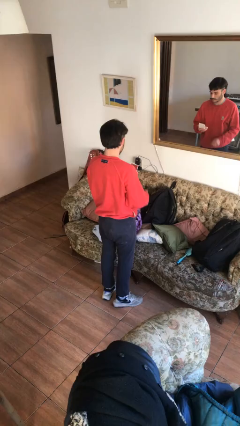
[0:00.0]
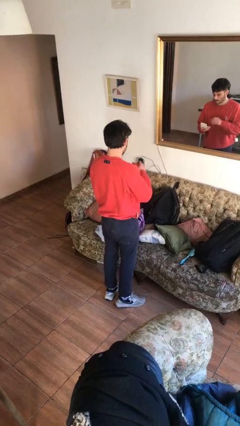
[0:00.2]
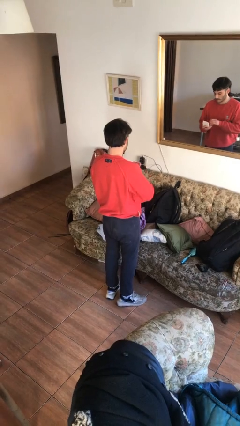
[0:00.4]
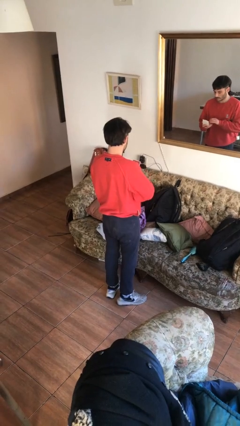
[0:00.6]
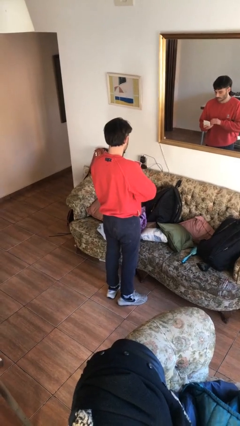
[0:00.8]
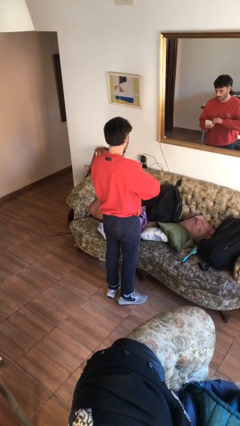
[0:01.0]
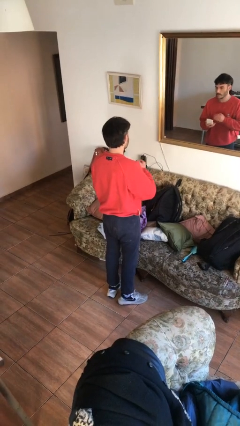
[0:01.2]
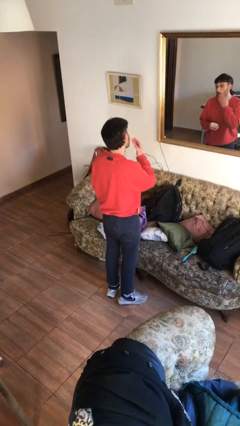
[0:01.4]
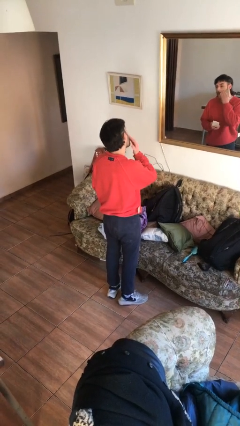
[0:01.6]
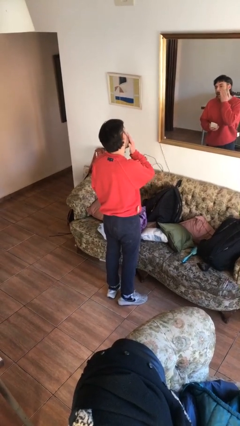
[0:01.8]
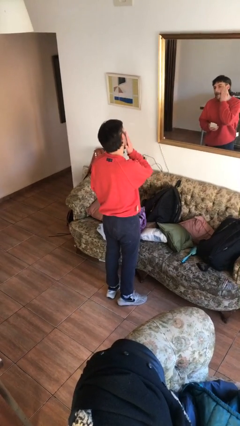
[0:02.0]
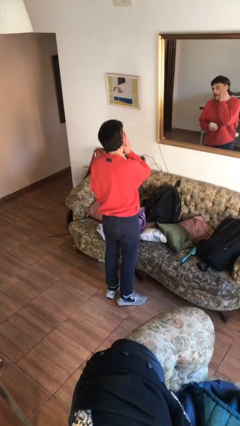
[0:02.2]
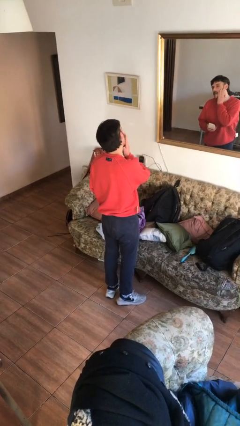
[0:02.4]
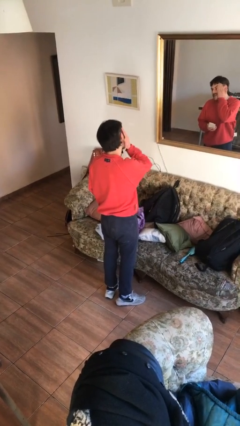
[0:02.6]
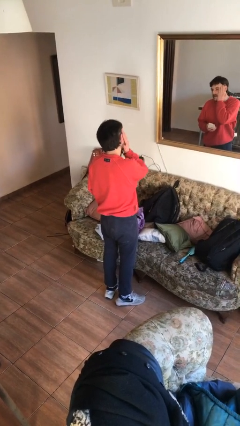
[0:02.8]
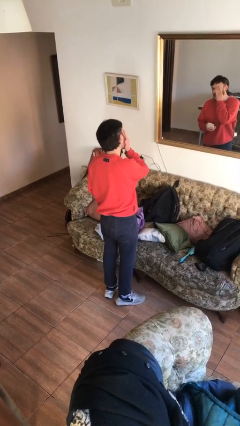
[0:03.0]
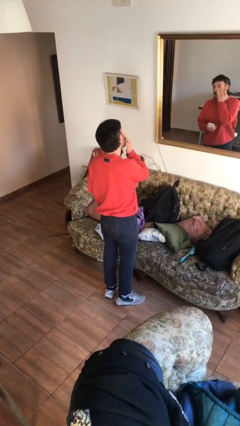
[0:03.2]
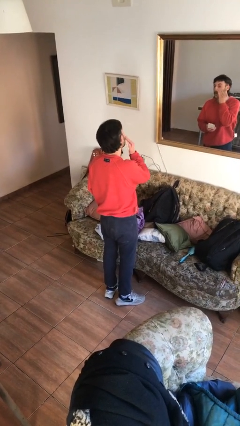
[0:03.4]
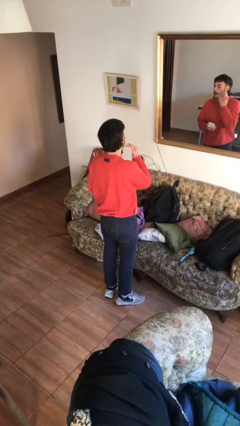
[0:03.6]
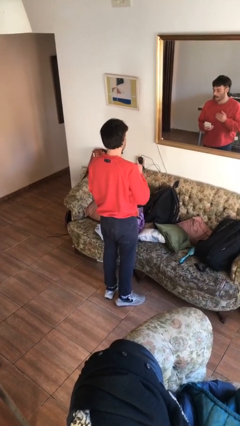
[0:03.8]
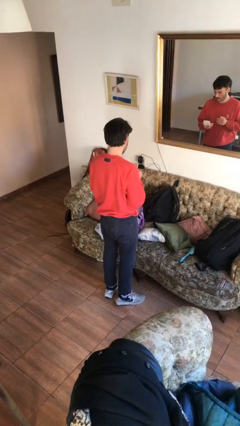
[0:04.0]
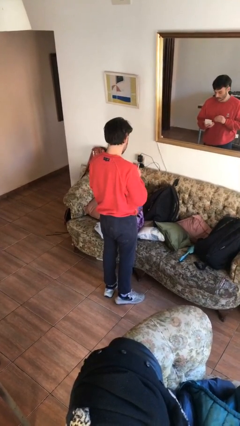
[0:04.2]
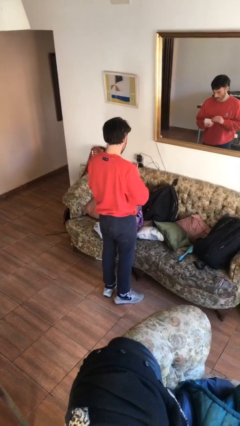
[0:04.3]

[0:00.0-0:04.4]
person applies foundation makeup

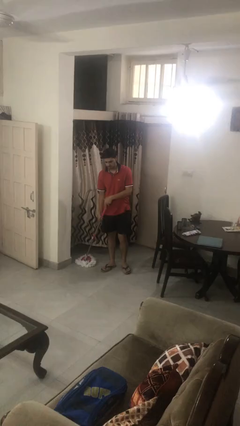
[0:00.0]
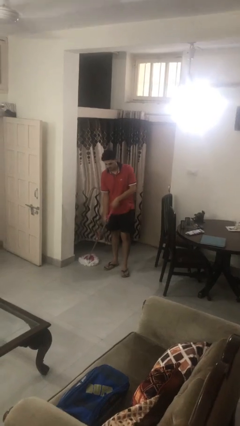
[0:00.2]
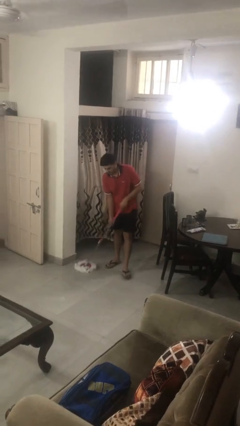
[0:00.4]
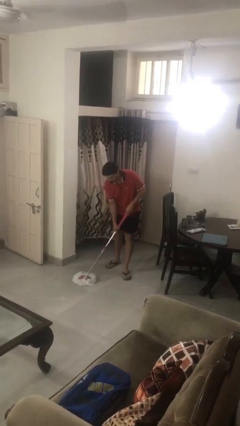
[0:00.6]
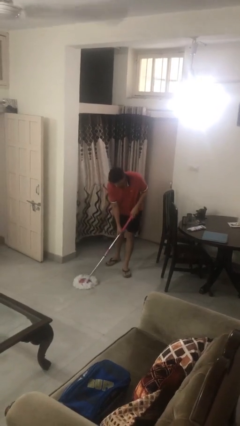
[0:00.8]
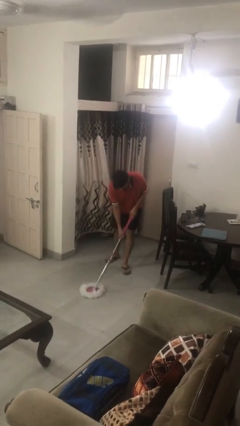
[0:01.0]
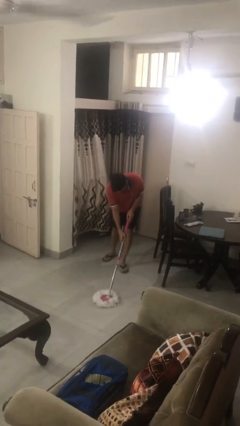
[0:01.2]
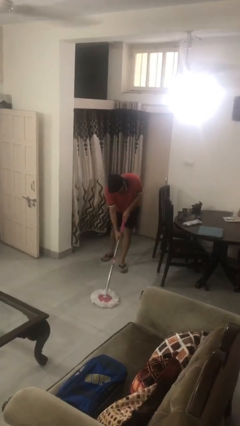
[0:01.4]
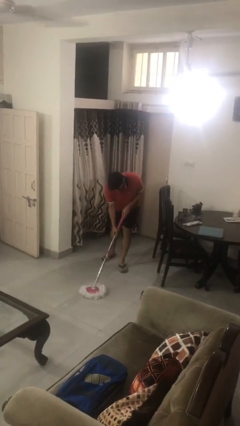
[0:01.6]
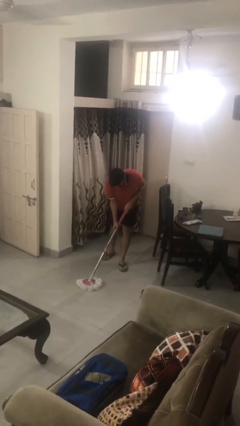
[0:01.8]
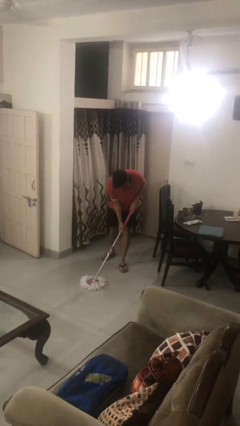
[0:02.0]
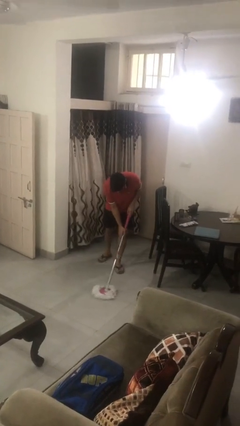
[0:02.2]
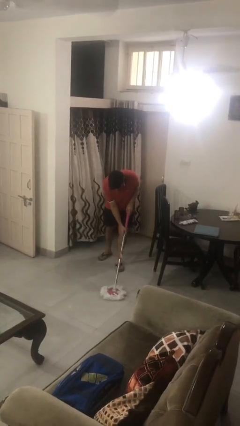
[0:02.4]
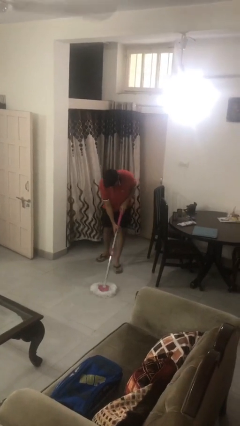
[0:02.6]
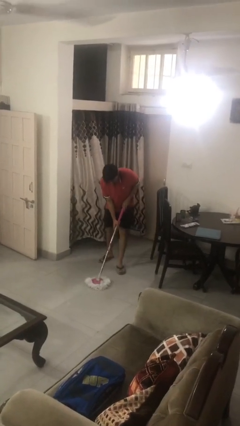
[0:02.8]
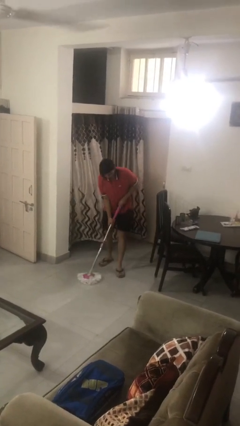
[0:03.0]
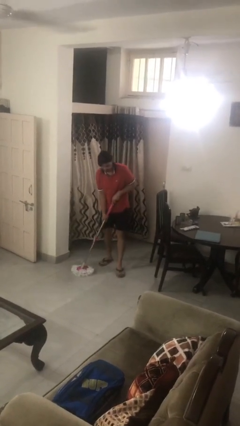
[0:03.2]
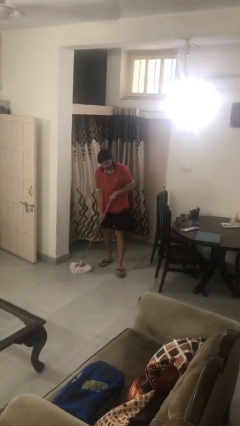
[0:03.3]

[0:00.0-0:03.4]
person mops

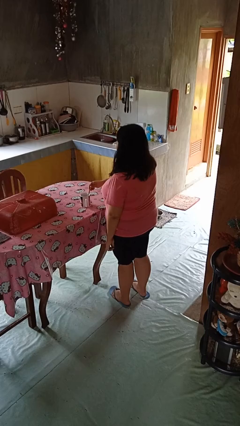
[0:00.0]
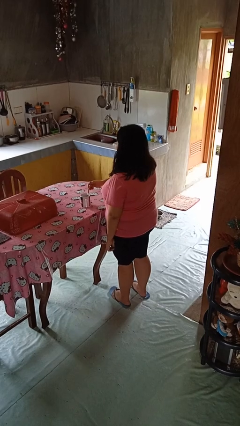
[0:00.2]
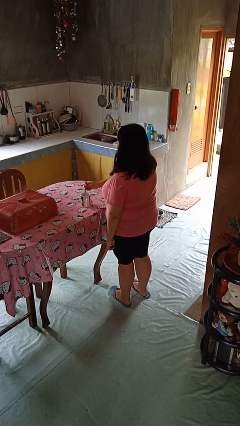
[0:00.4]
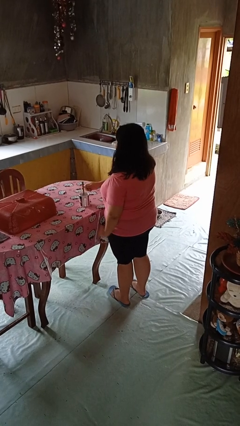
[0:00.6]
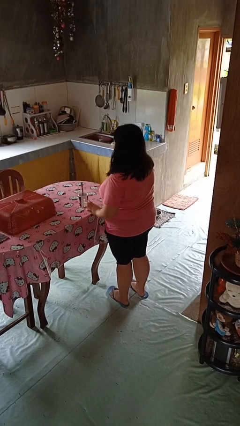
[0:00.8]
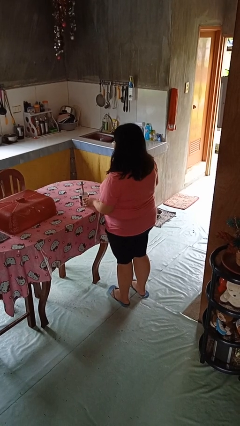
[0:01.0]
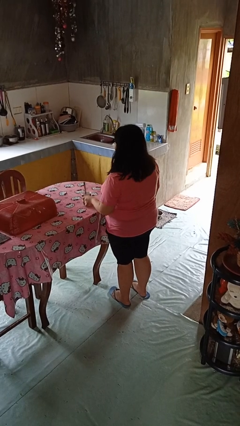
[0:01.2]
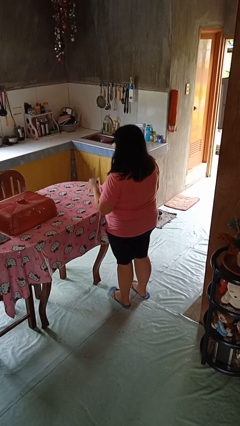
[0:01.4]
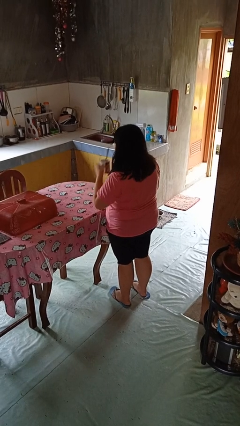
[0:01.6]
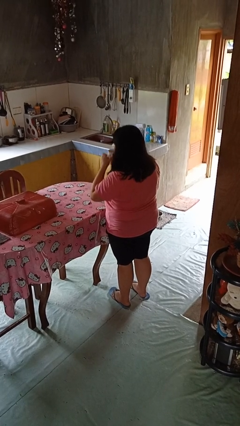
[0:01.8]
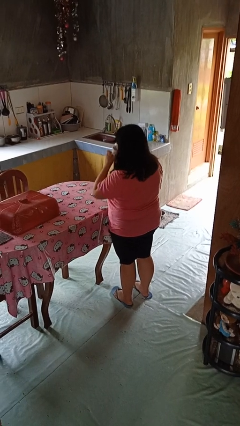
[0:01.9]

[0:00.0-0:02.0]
person stirs mug

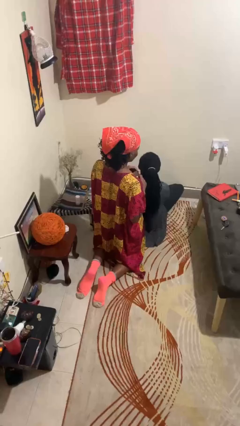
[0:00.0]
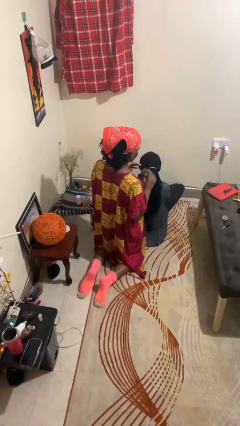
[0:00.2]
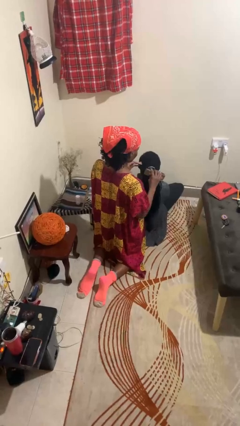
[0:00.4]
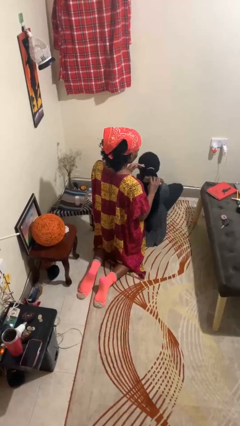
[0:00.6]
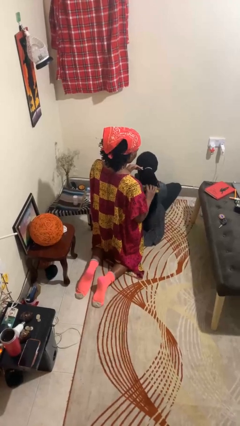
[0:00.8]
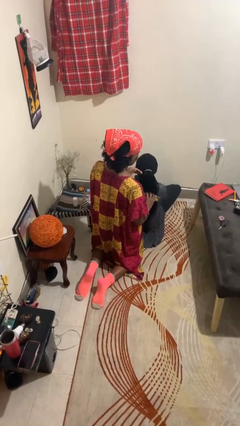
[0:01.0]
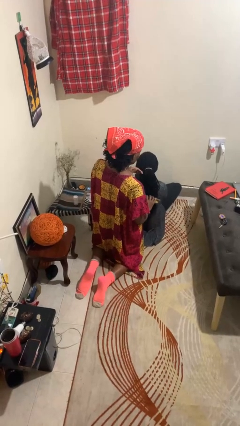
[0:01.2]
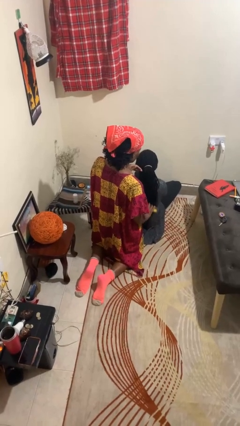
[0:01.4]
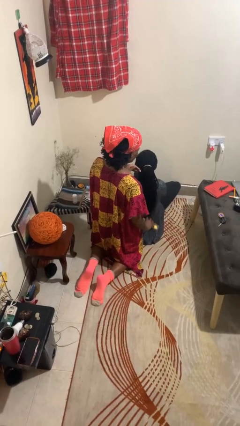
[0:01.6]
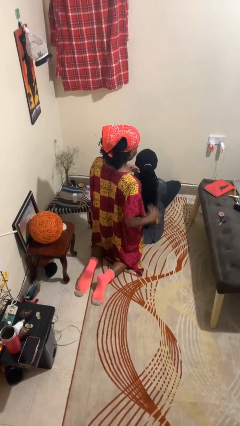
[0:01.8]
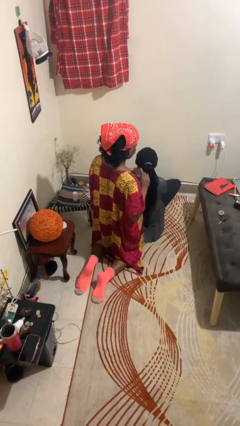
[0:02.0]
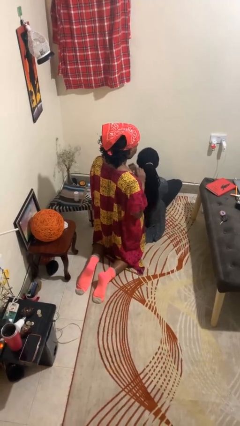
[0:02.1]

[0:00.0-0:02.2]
person brushes hair of person

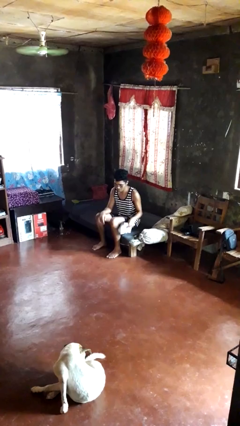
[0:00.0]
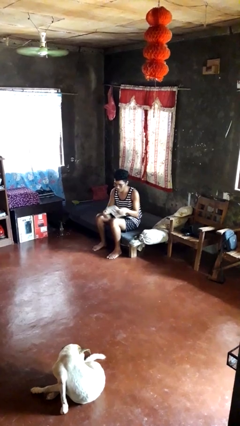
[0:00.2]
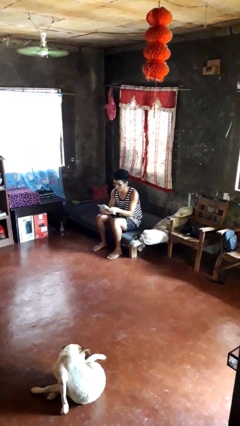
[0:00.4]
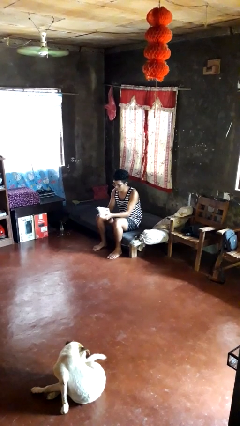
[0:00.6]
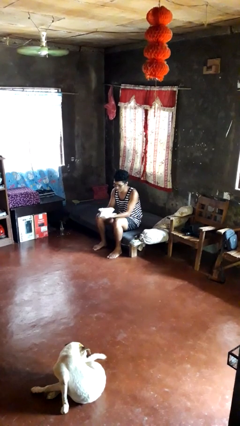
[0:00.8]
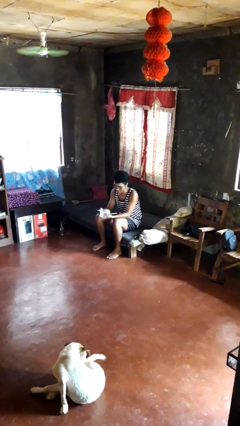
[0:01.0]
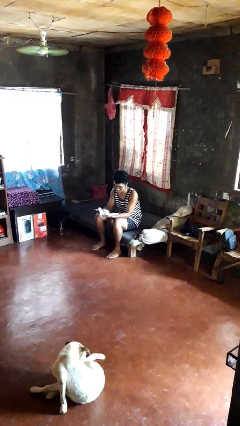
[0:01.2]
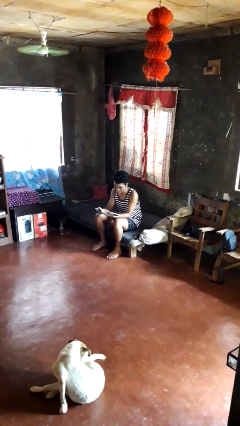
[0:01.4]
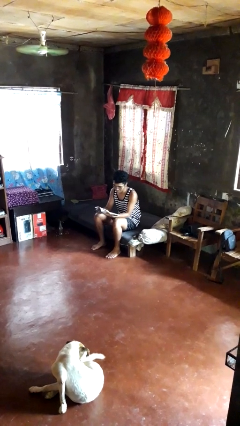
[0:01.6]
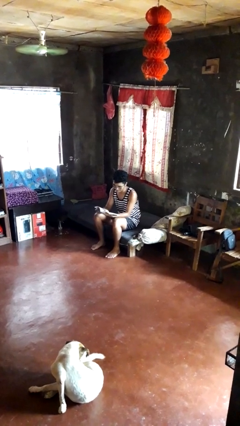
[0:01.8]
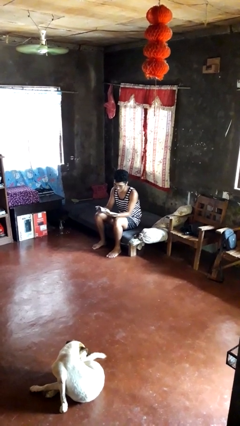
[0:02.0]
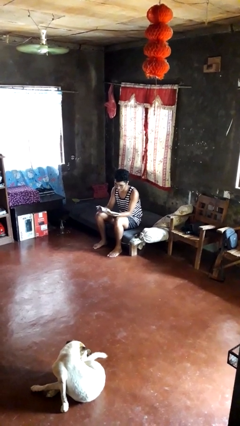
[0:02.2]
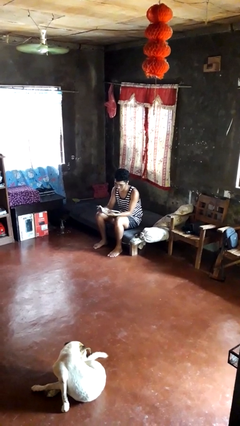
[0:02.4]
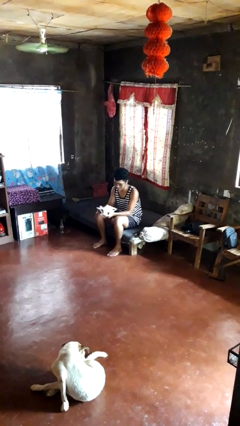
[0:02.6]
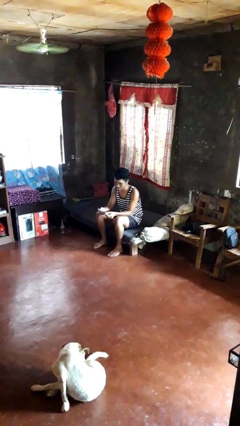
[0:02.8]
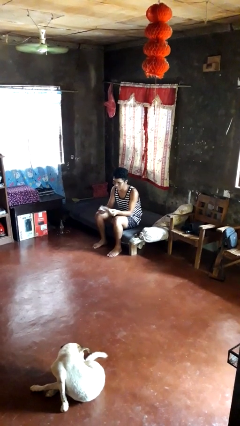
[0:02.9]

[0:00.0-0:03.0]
person reads magazine

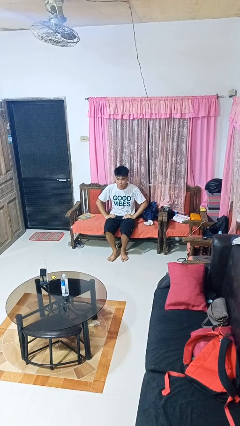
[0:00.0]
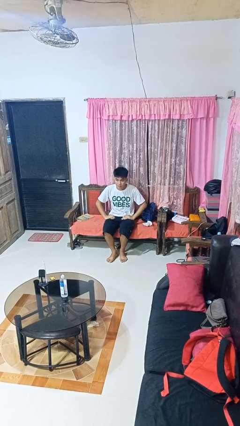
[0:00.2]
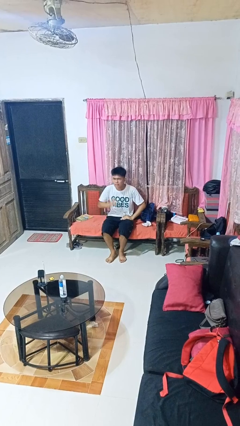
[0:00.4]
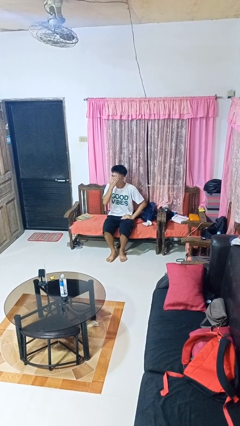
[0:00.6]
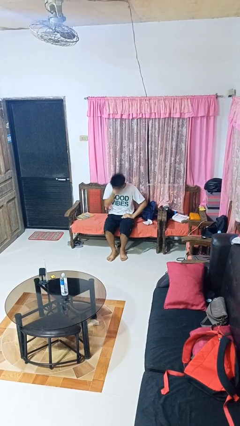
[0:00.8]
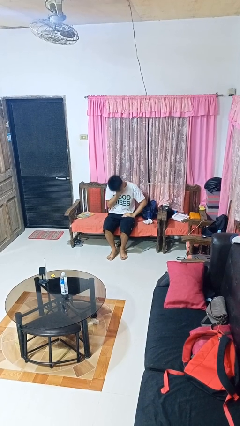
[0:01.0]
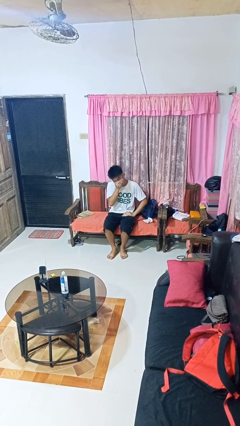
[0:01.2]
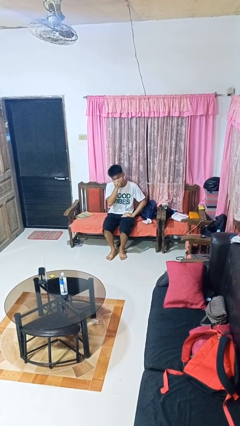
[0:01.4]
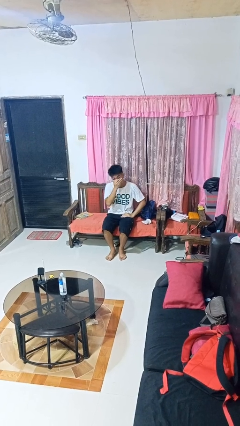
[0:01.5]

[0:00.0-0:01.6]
person sneezes into hand

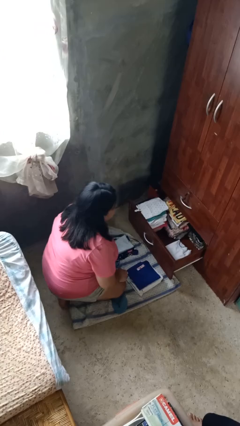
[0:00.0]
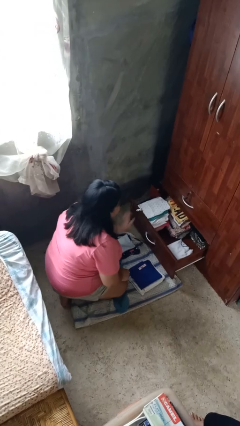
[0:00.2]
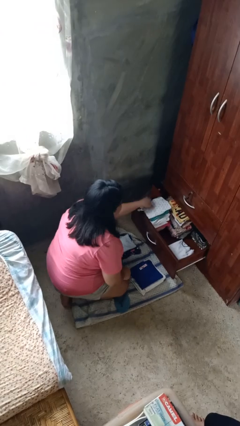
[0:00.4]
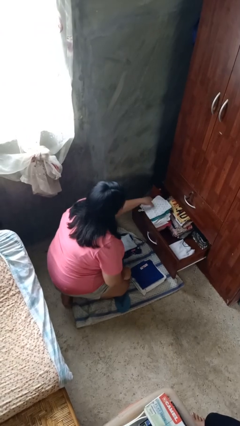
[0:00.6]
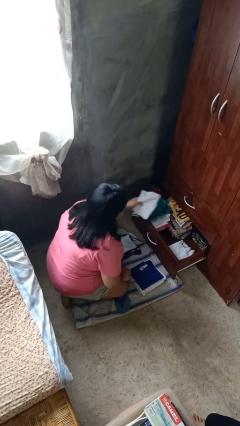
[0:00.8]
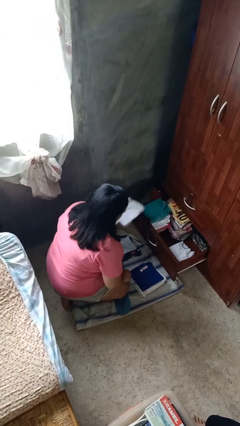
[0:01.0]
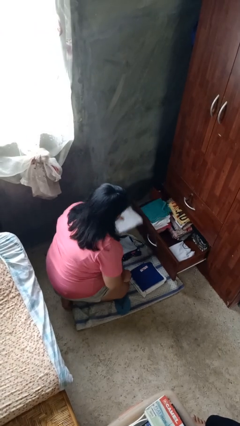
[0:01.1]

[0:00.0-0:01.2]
person takes clothes from dresser
